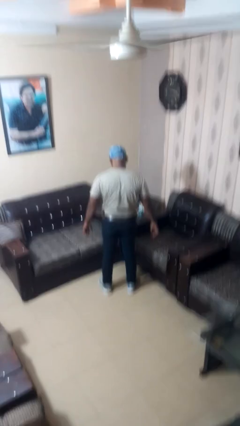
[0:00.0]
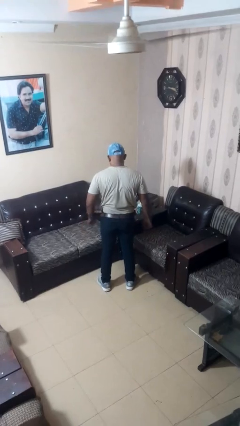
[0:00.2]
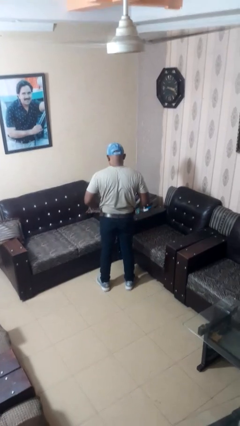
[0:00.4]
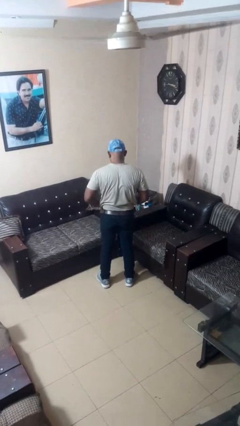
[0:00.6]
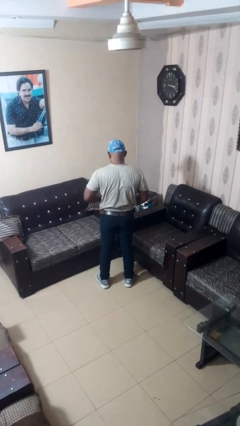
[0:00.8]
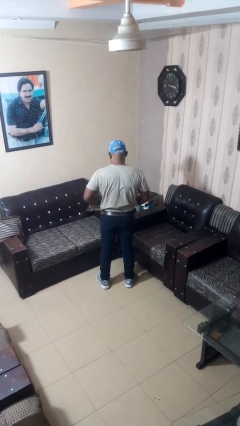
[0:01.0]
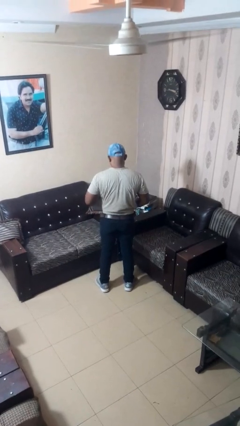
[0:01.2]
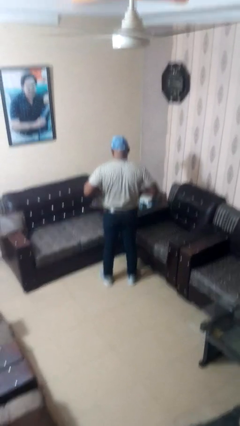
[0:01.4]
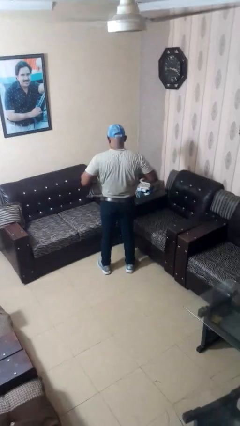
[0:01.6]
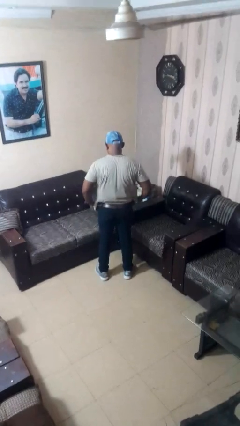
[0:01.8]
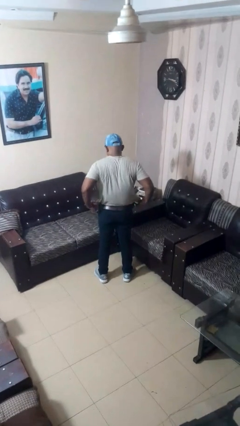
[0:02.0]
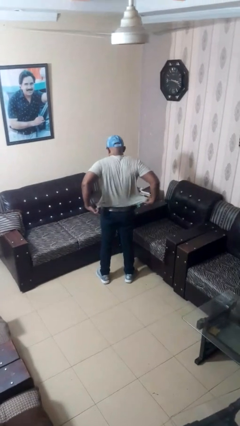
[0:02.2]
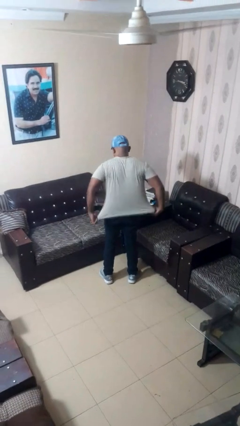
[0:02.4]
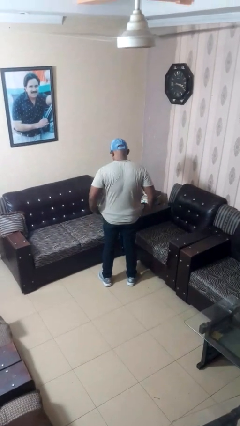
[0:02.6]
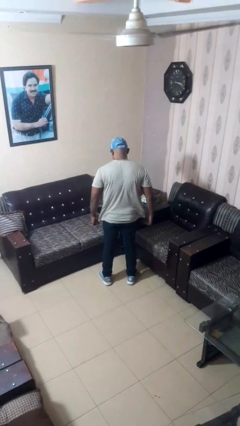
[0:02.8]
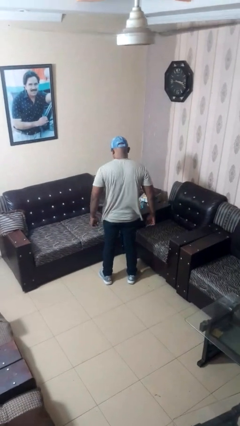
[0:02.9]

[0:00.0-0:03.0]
person untucks shirt

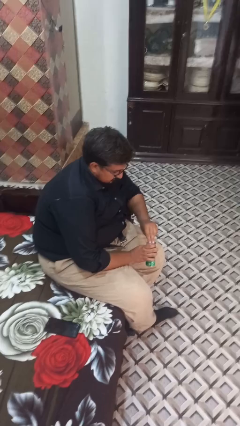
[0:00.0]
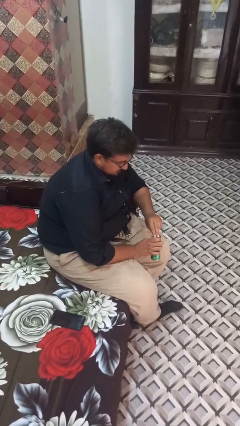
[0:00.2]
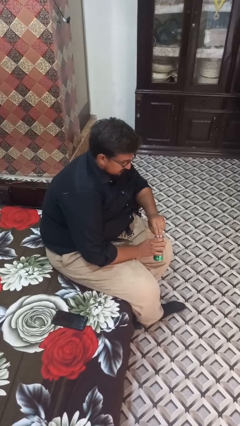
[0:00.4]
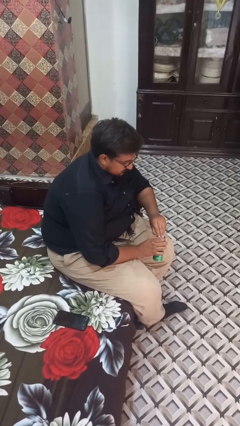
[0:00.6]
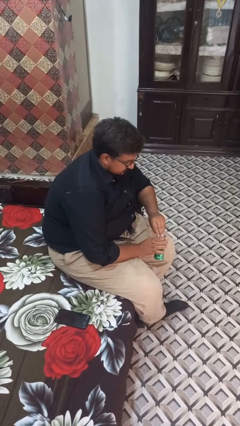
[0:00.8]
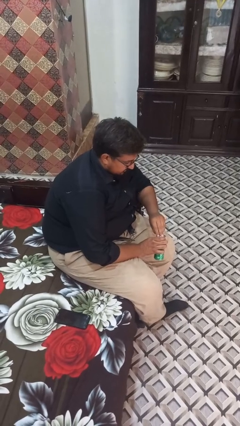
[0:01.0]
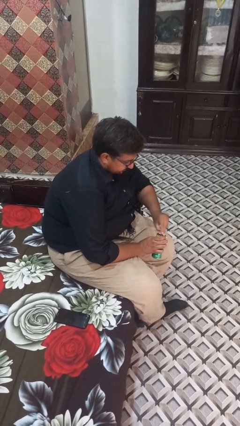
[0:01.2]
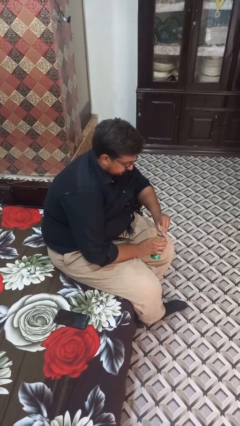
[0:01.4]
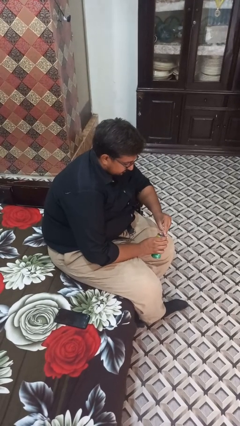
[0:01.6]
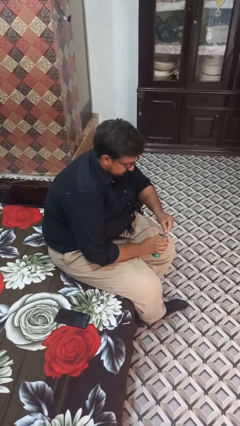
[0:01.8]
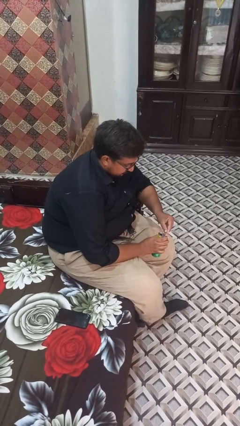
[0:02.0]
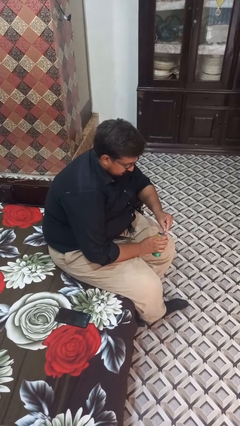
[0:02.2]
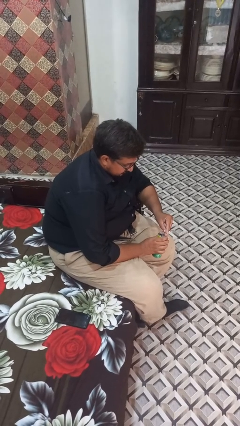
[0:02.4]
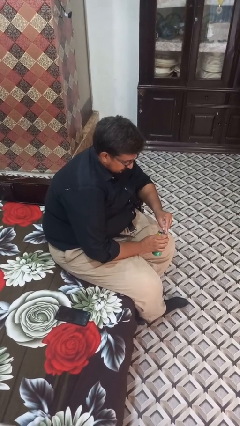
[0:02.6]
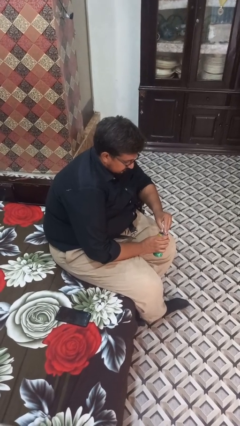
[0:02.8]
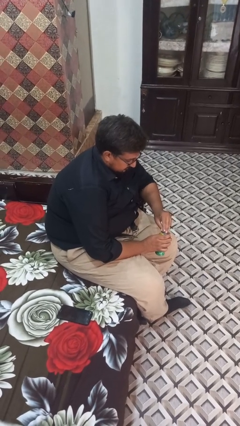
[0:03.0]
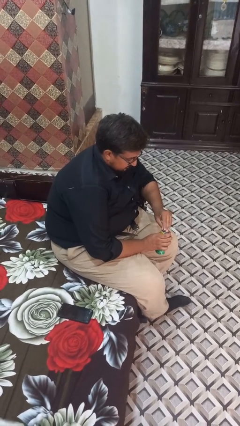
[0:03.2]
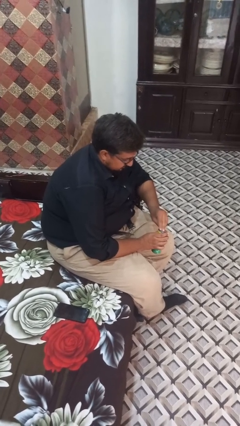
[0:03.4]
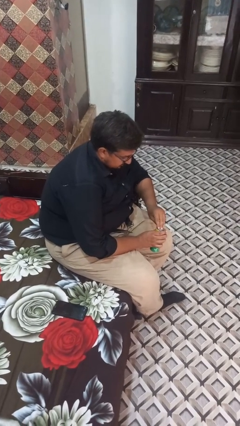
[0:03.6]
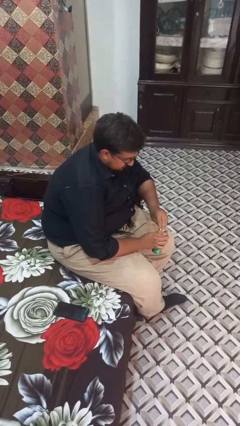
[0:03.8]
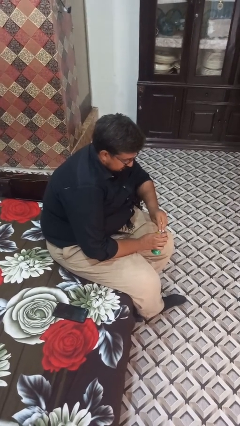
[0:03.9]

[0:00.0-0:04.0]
person opens can with can opener

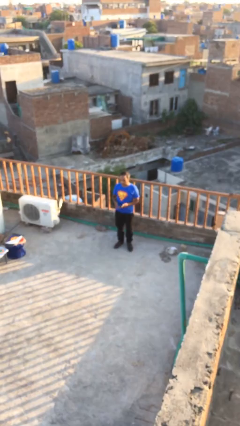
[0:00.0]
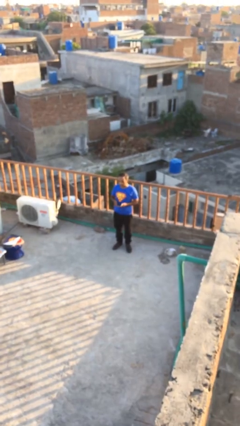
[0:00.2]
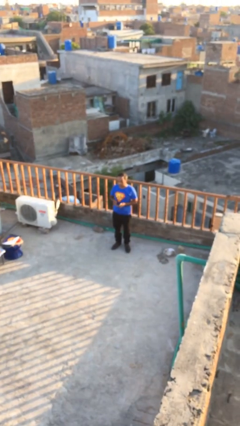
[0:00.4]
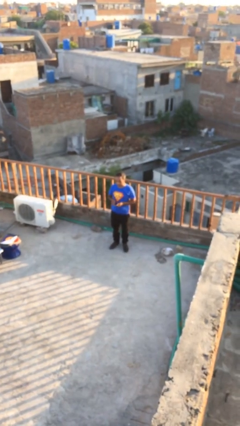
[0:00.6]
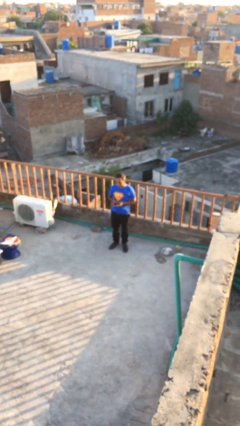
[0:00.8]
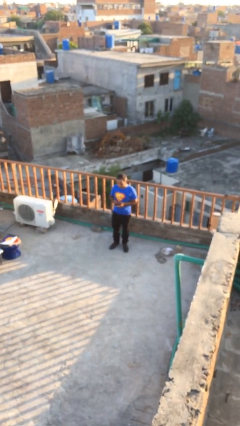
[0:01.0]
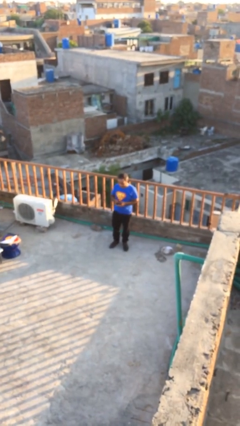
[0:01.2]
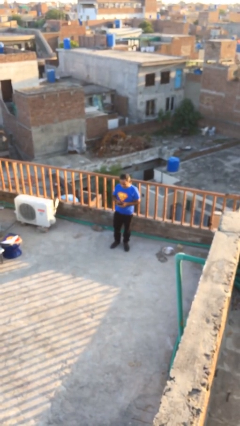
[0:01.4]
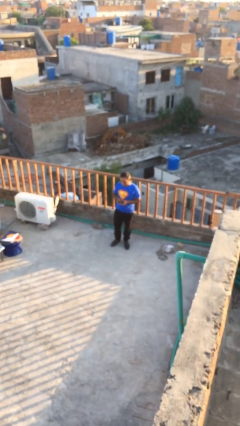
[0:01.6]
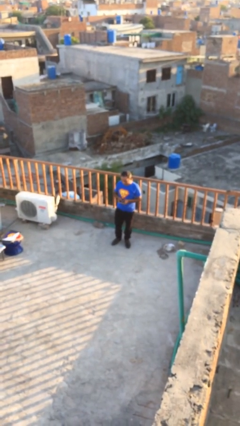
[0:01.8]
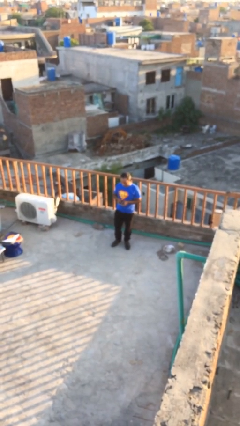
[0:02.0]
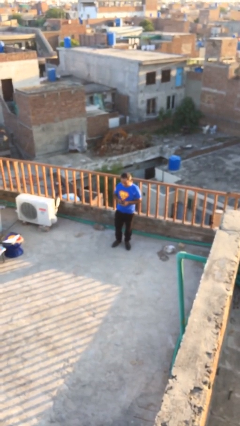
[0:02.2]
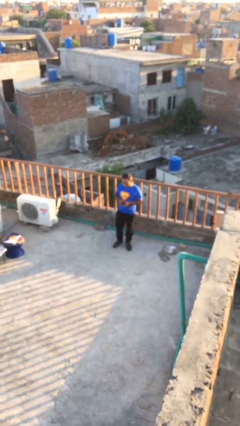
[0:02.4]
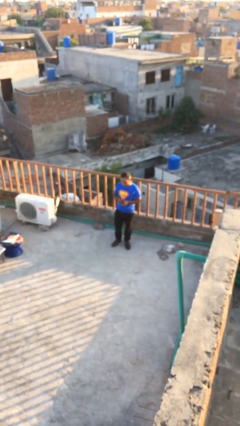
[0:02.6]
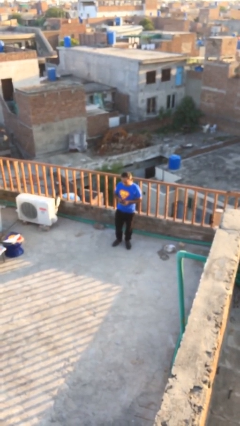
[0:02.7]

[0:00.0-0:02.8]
person texts on phone

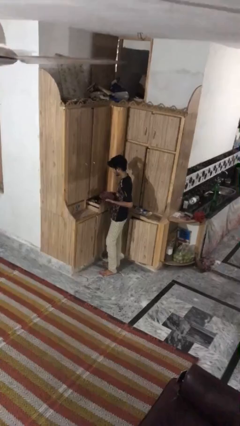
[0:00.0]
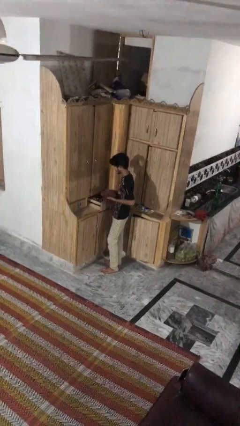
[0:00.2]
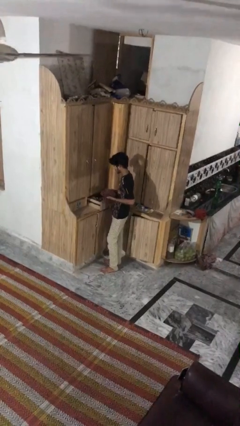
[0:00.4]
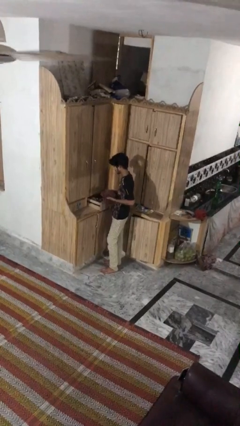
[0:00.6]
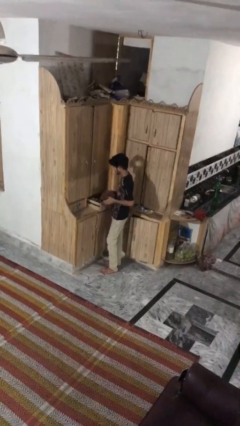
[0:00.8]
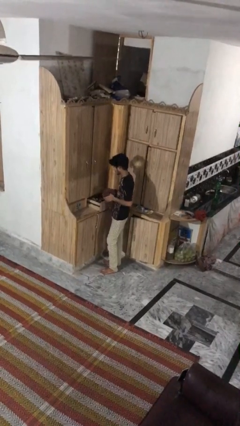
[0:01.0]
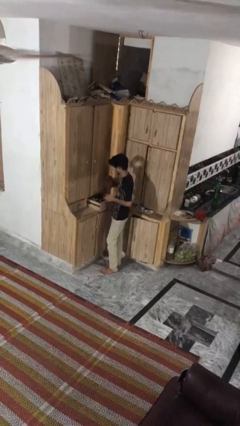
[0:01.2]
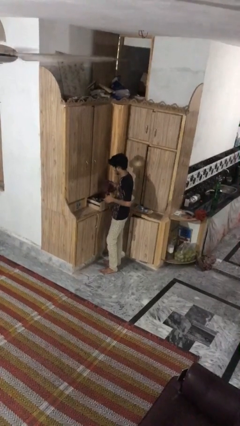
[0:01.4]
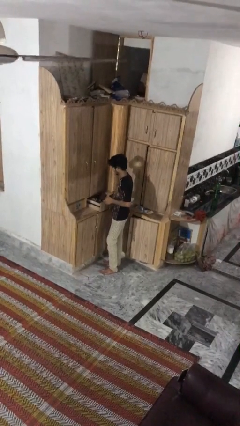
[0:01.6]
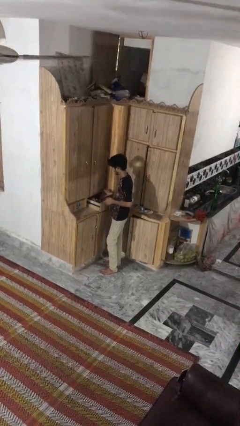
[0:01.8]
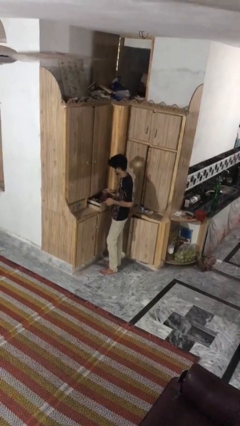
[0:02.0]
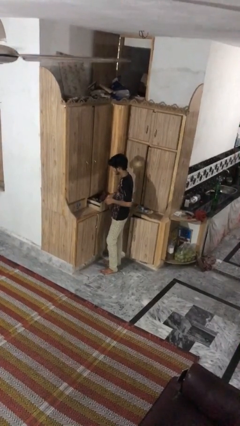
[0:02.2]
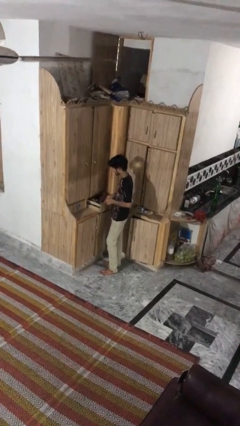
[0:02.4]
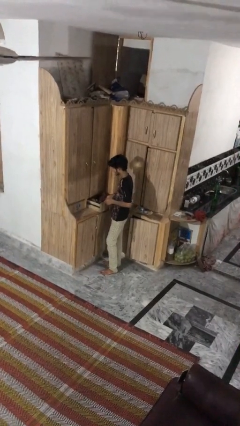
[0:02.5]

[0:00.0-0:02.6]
person puts clothes into dresser

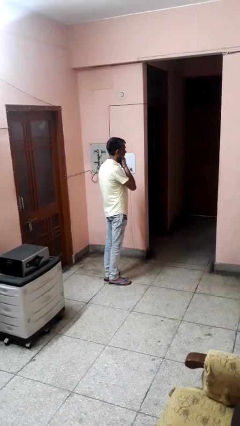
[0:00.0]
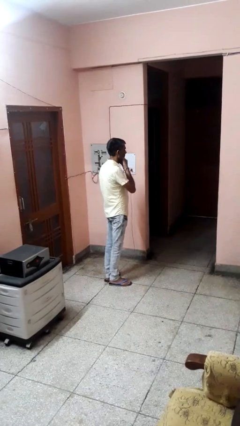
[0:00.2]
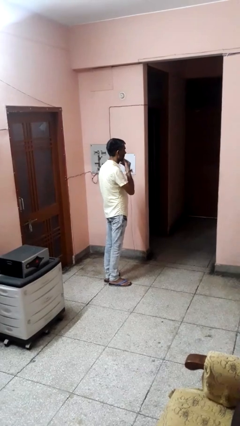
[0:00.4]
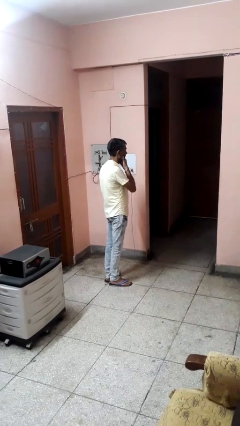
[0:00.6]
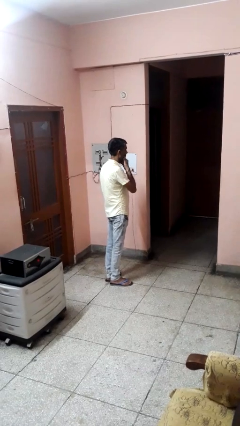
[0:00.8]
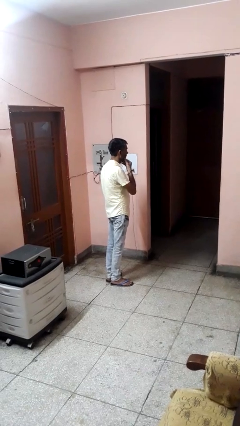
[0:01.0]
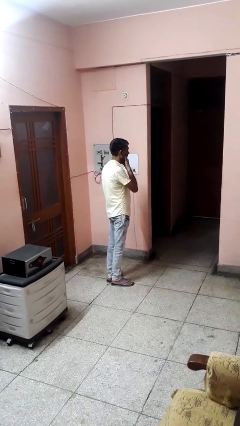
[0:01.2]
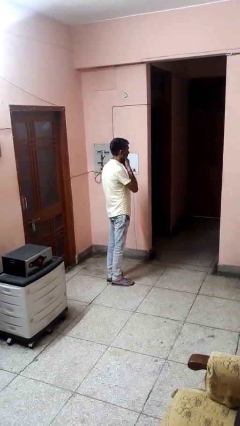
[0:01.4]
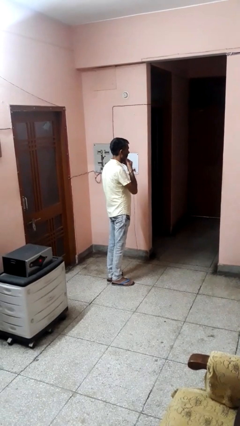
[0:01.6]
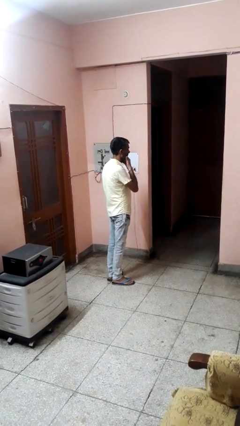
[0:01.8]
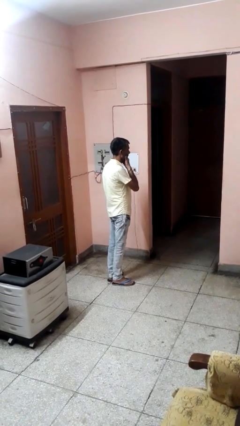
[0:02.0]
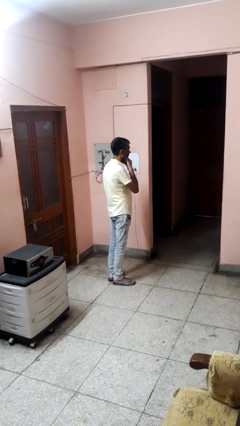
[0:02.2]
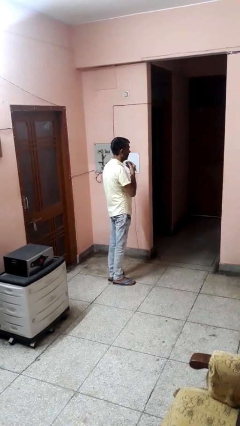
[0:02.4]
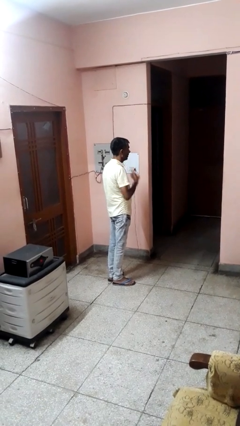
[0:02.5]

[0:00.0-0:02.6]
person strokes chin

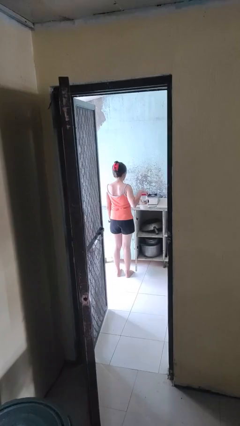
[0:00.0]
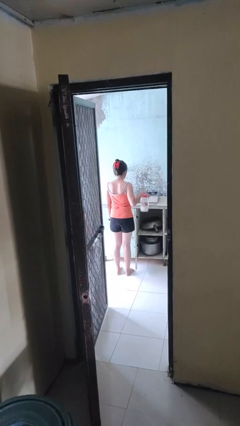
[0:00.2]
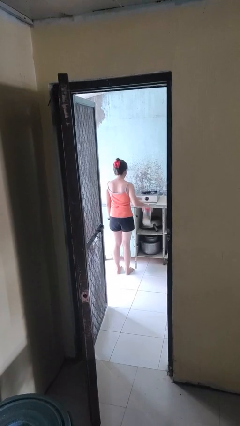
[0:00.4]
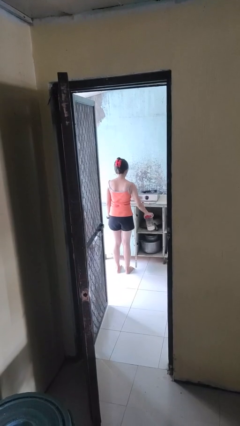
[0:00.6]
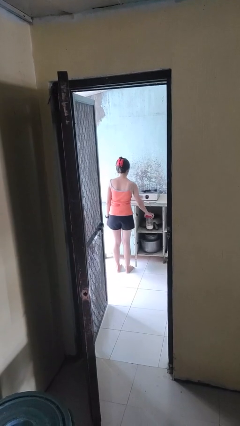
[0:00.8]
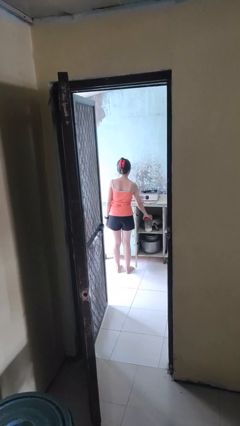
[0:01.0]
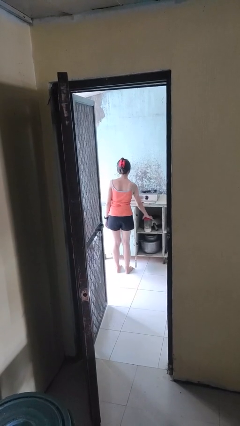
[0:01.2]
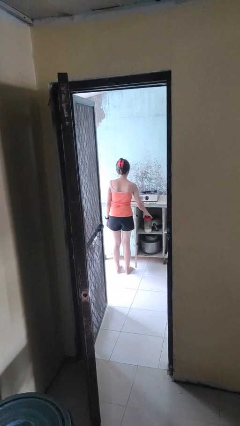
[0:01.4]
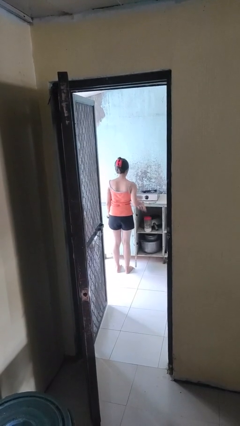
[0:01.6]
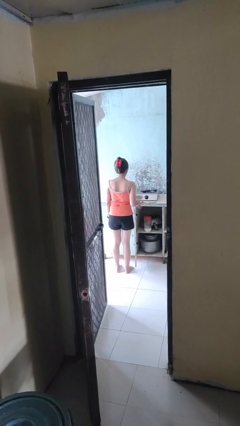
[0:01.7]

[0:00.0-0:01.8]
person puts down object into cabinet

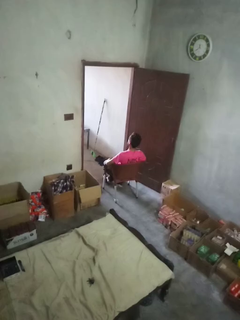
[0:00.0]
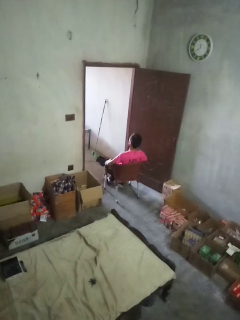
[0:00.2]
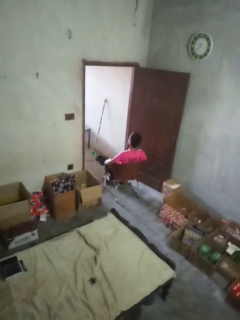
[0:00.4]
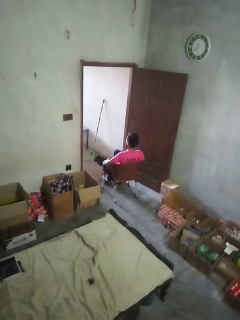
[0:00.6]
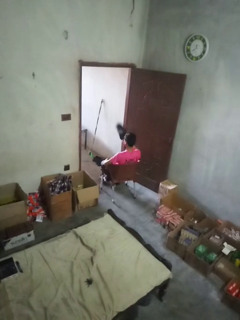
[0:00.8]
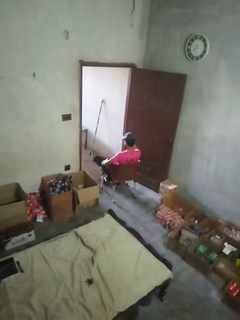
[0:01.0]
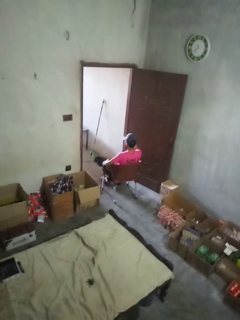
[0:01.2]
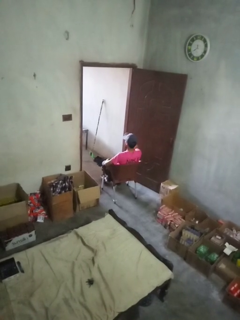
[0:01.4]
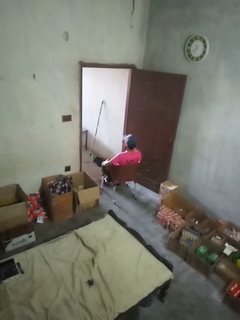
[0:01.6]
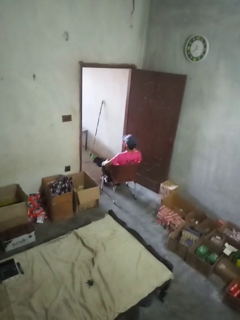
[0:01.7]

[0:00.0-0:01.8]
person puts on hat
